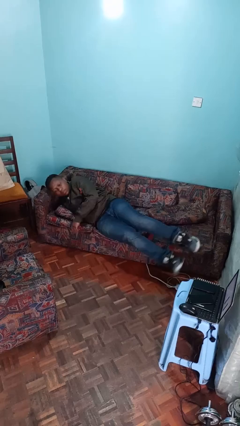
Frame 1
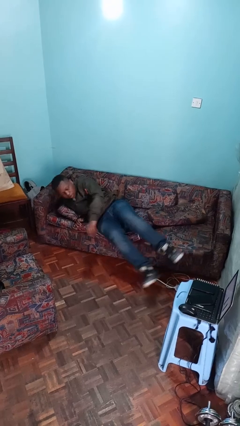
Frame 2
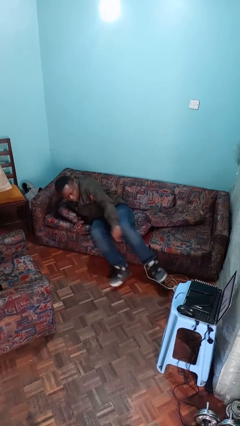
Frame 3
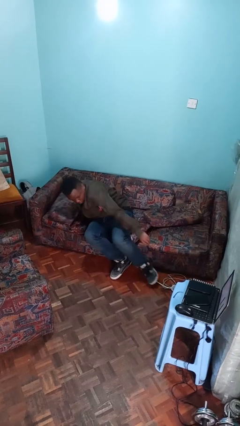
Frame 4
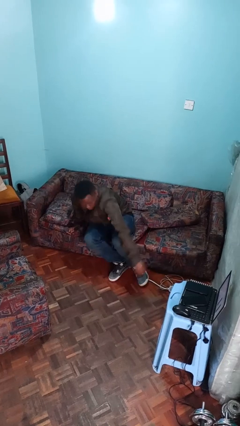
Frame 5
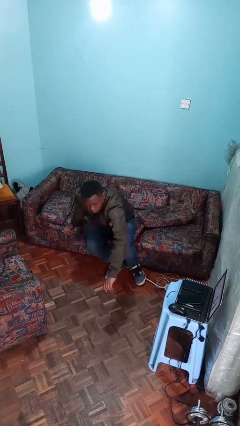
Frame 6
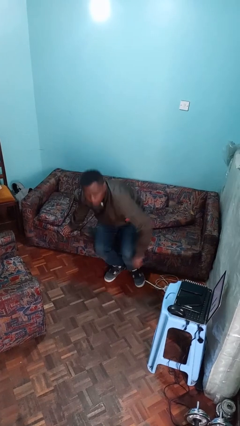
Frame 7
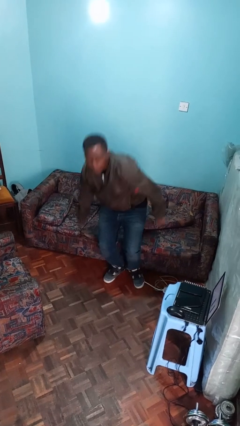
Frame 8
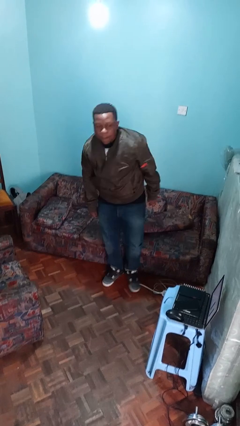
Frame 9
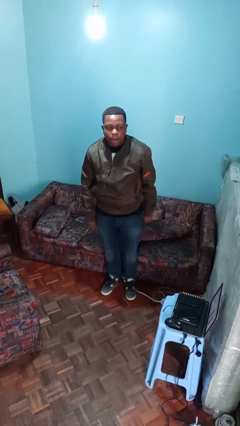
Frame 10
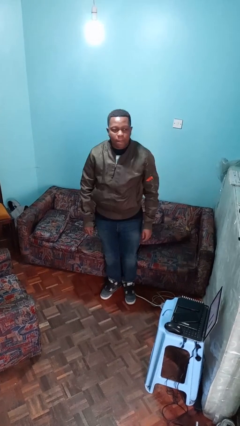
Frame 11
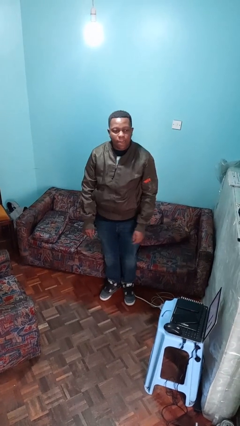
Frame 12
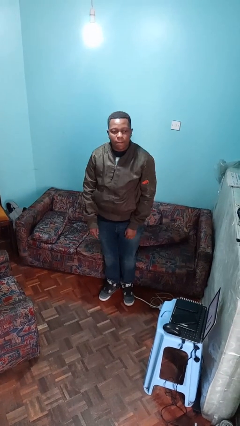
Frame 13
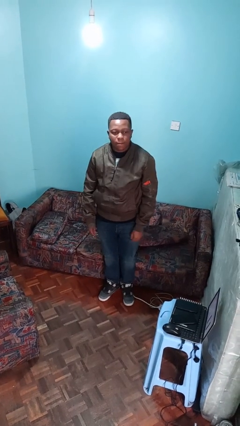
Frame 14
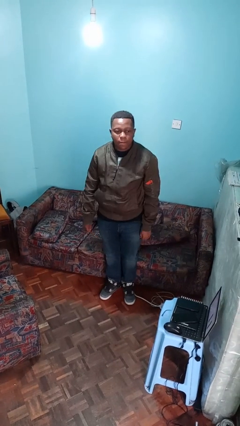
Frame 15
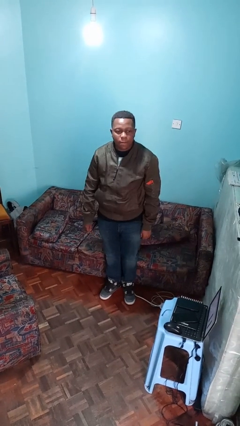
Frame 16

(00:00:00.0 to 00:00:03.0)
person stands up

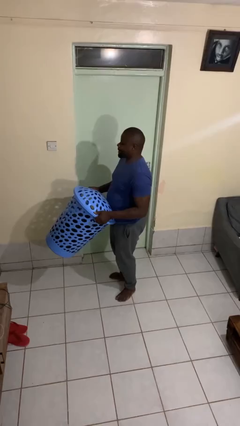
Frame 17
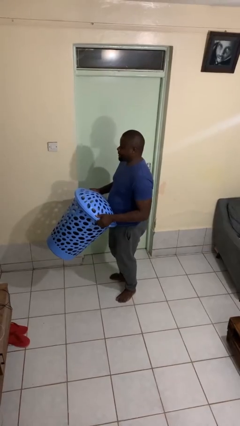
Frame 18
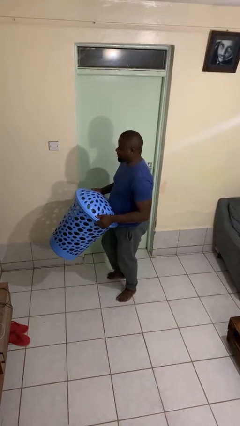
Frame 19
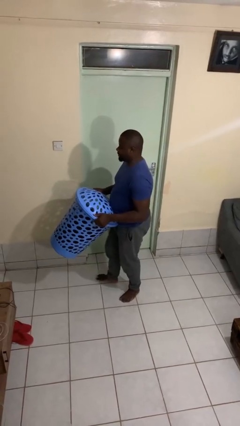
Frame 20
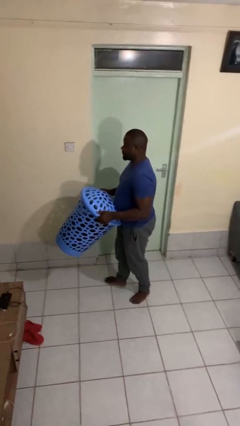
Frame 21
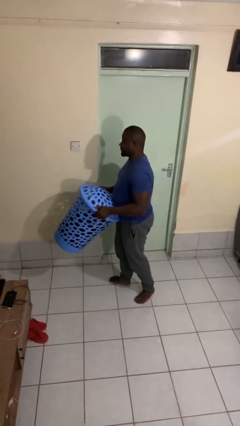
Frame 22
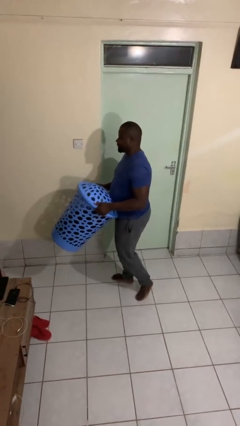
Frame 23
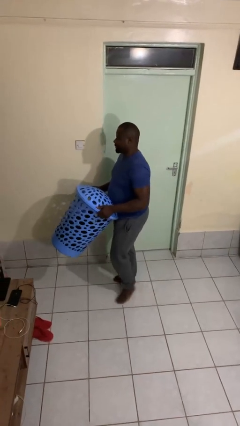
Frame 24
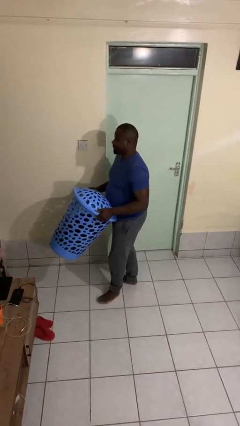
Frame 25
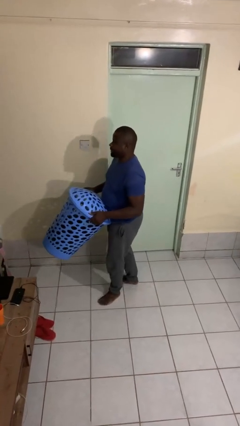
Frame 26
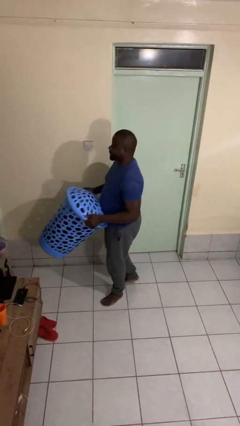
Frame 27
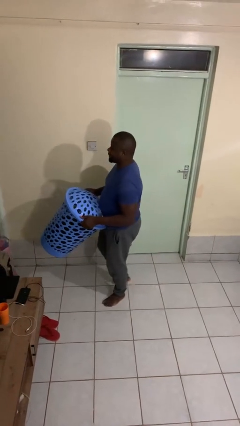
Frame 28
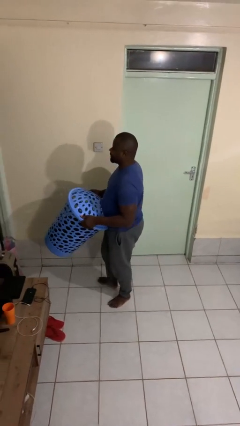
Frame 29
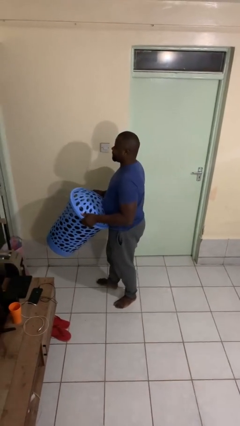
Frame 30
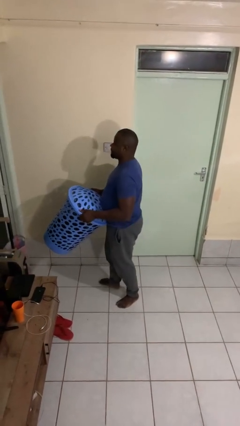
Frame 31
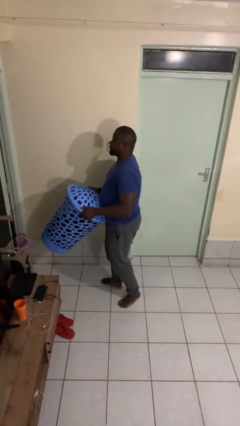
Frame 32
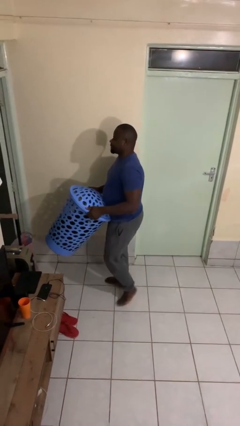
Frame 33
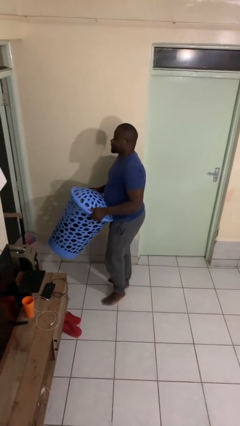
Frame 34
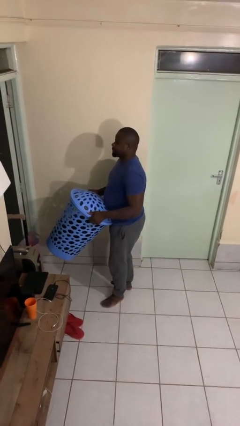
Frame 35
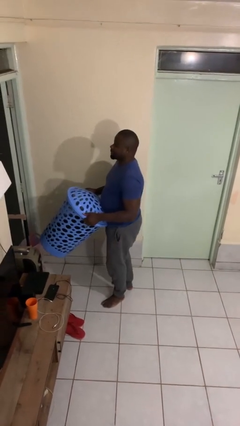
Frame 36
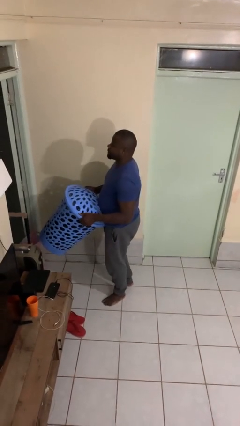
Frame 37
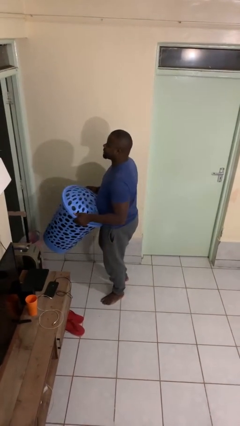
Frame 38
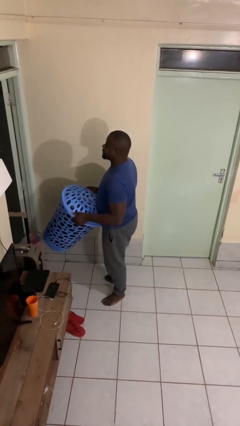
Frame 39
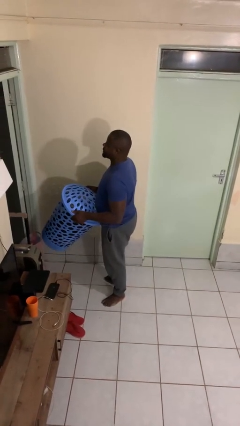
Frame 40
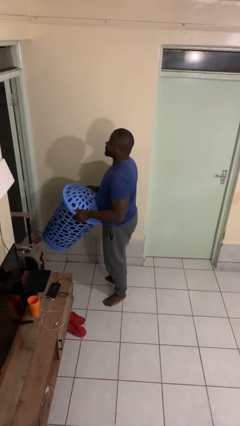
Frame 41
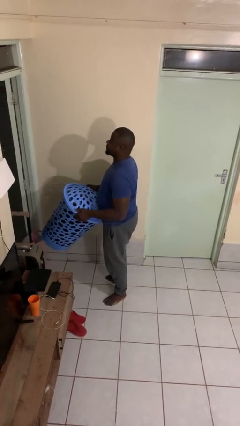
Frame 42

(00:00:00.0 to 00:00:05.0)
person carries laundry basket

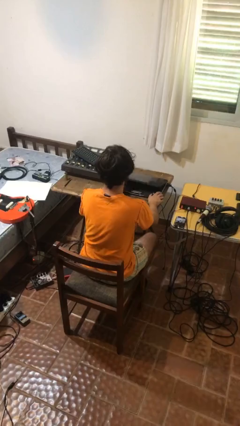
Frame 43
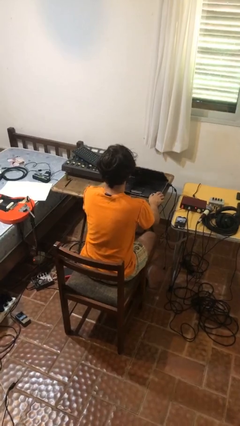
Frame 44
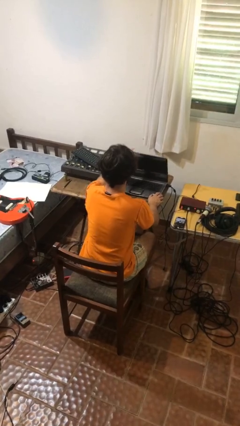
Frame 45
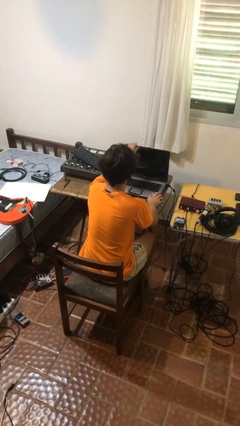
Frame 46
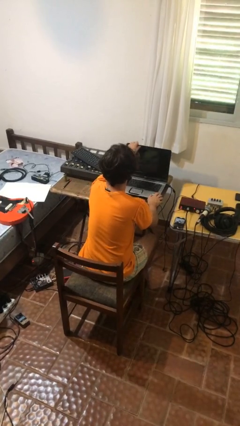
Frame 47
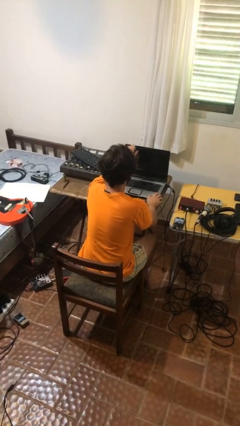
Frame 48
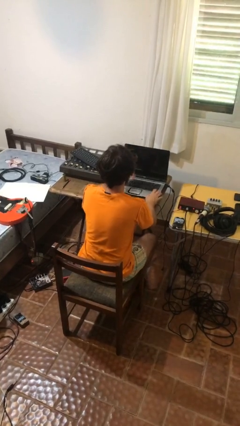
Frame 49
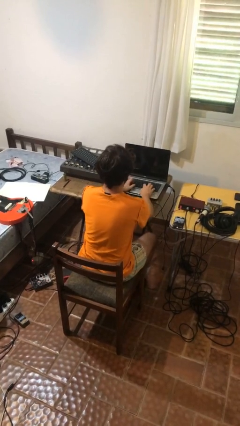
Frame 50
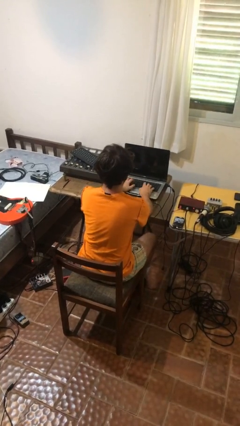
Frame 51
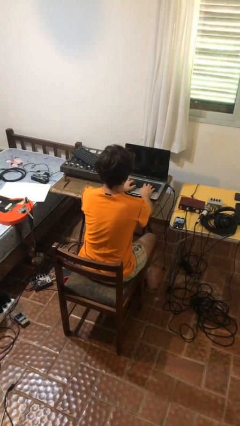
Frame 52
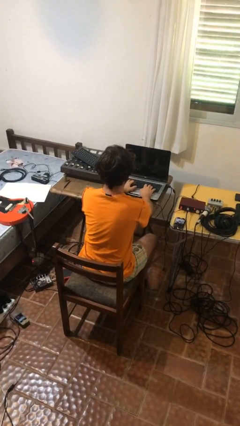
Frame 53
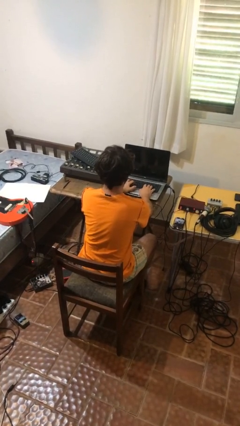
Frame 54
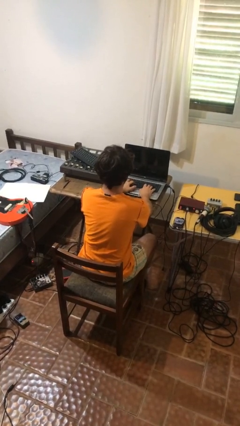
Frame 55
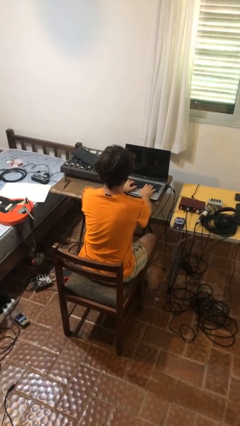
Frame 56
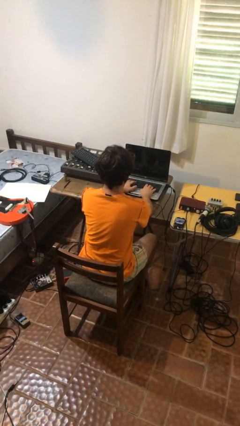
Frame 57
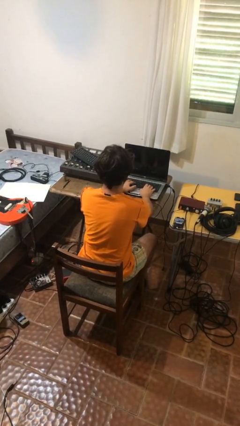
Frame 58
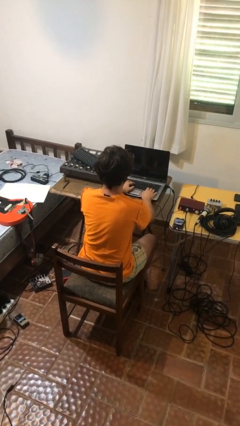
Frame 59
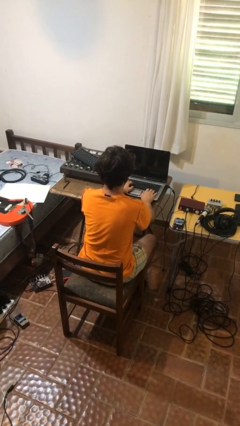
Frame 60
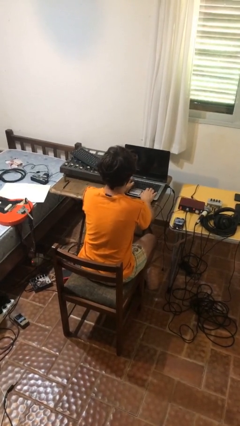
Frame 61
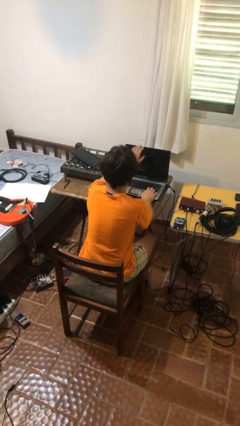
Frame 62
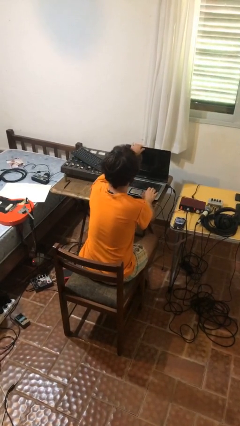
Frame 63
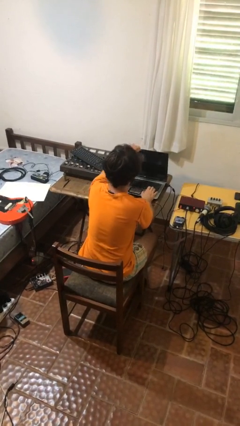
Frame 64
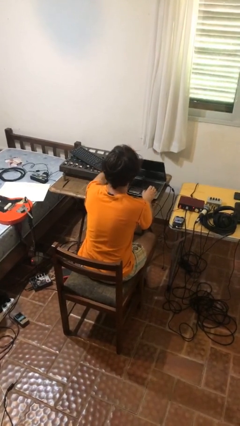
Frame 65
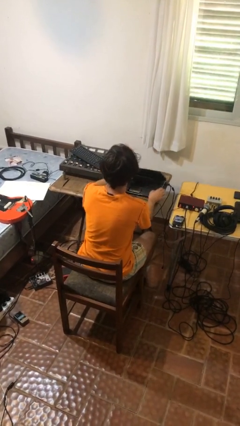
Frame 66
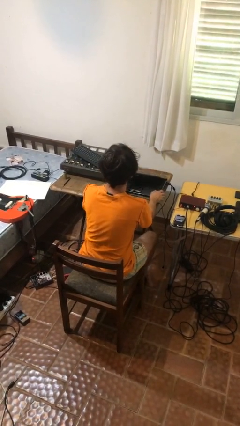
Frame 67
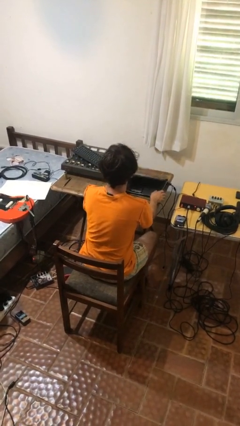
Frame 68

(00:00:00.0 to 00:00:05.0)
person interacts with laptop

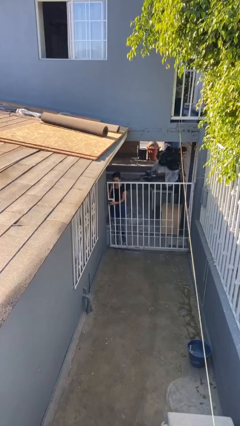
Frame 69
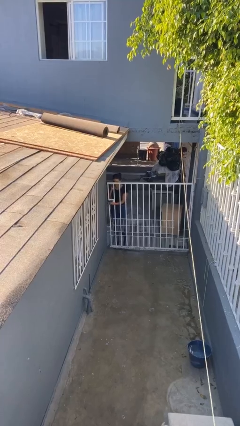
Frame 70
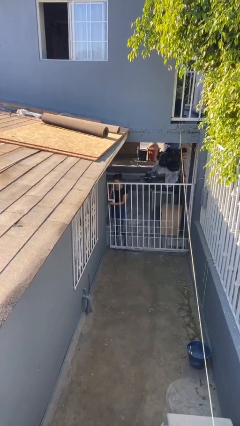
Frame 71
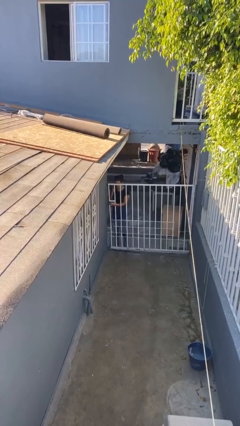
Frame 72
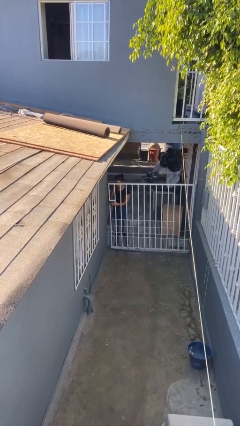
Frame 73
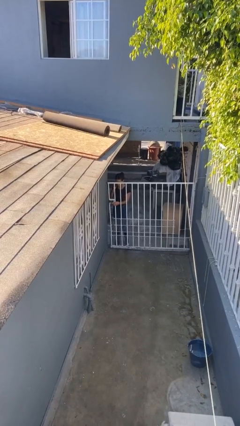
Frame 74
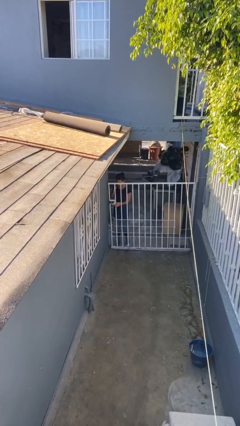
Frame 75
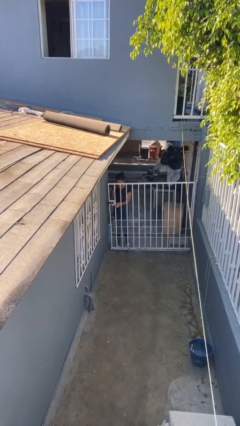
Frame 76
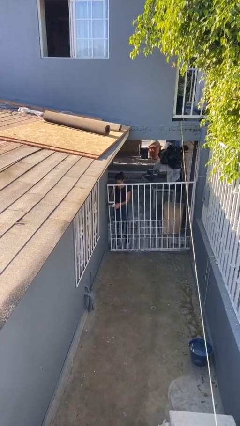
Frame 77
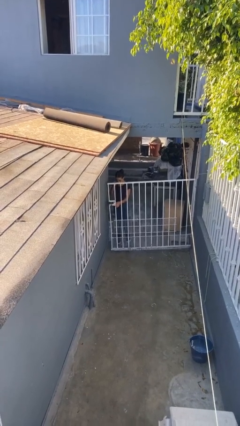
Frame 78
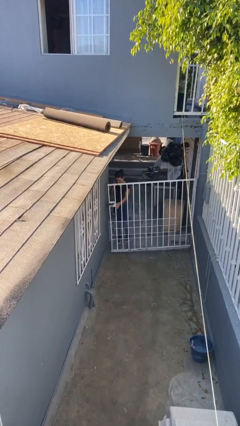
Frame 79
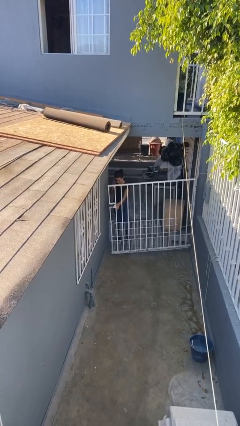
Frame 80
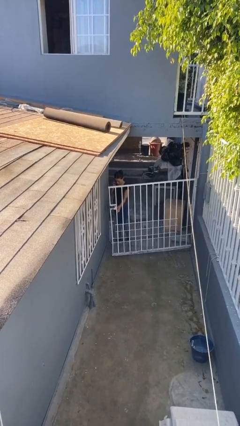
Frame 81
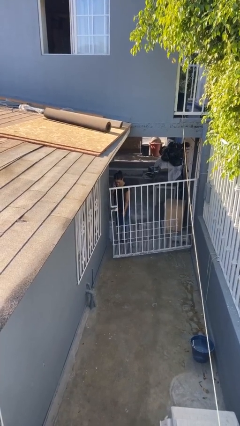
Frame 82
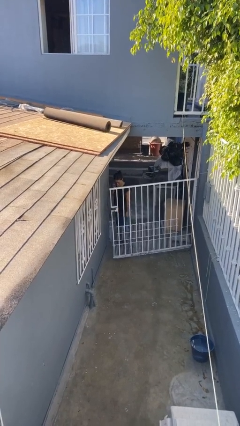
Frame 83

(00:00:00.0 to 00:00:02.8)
person opens facility door

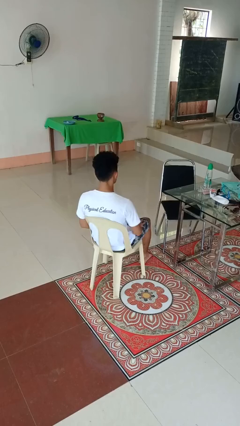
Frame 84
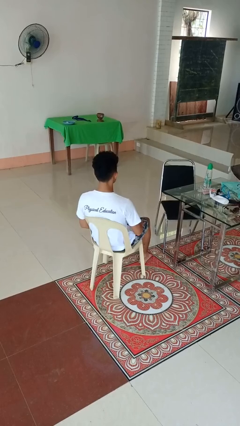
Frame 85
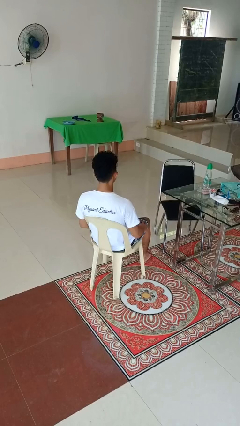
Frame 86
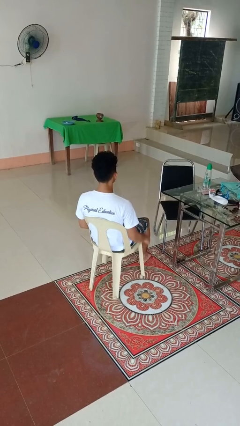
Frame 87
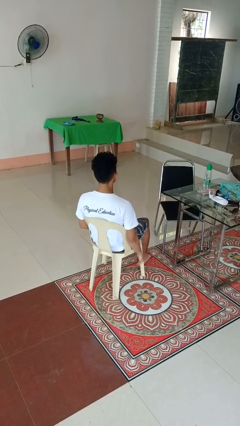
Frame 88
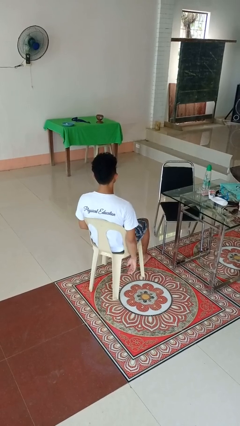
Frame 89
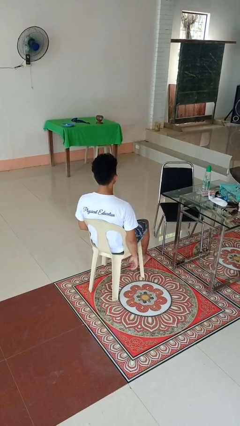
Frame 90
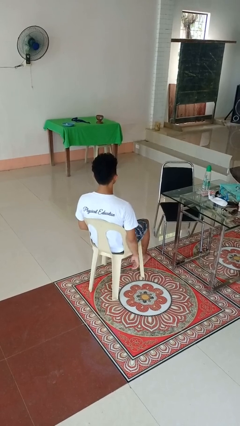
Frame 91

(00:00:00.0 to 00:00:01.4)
person slaps hands on thighs

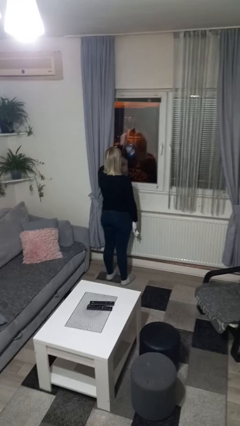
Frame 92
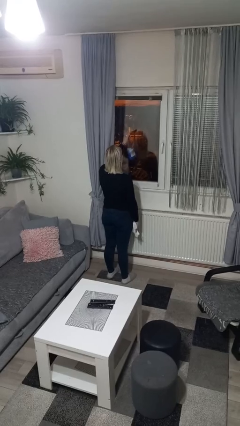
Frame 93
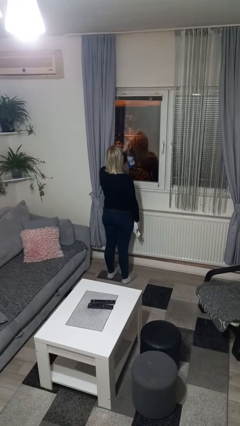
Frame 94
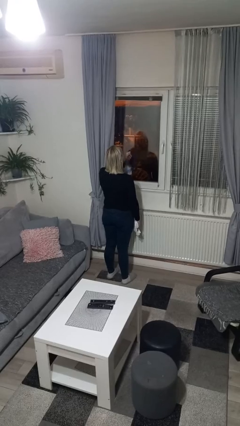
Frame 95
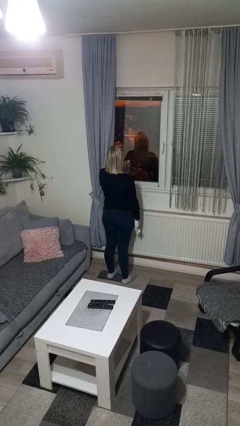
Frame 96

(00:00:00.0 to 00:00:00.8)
person sprays from bottle
